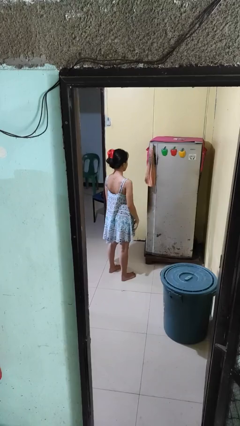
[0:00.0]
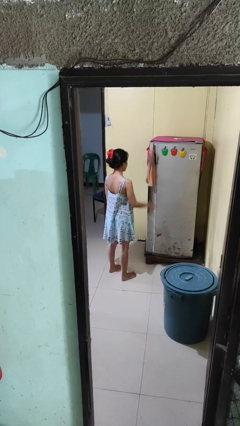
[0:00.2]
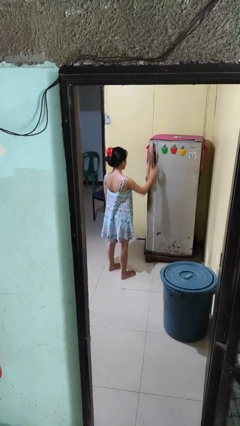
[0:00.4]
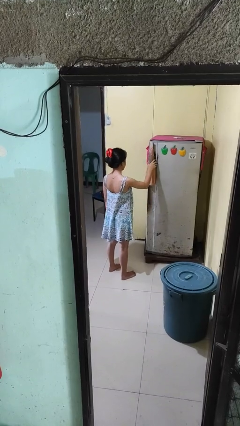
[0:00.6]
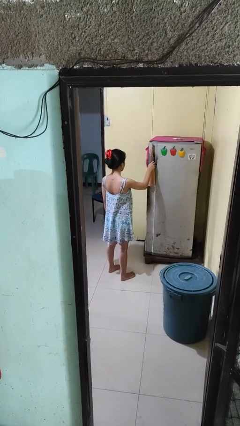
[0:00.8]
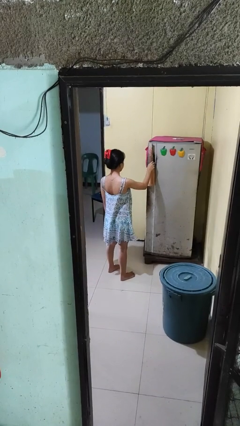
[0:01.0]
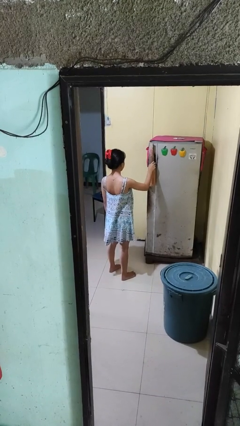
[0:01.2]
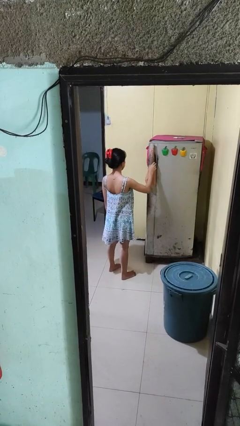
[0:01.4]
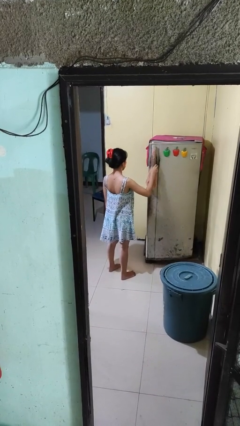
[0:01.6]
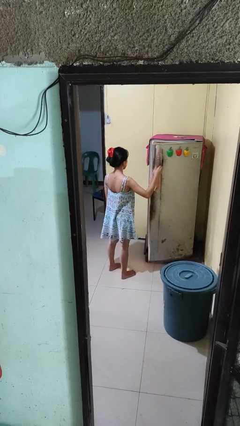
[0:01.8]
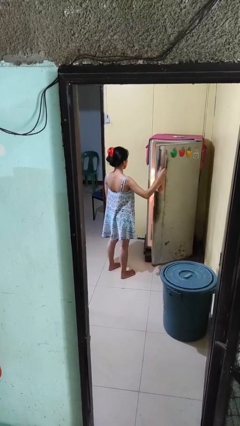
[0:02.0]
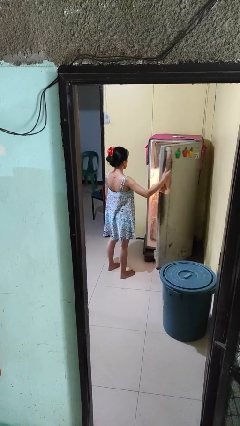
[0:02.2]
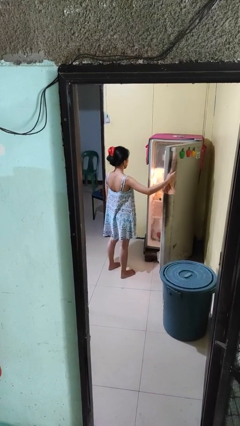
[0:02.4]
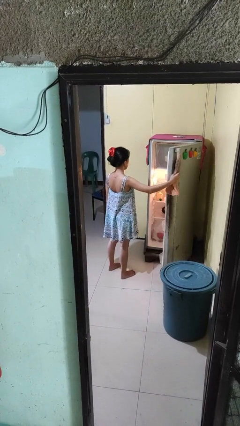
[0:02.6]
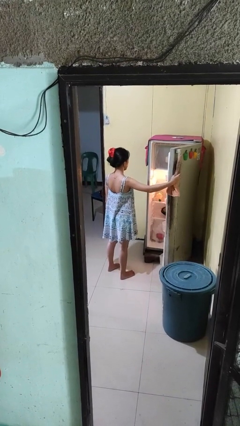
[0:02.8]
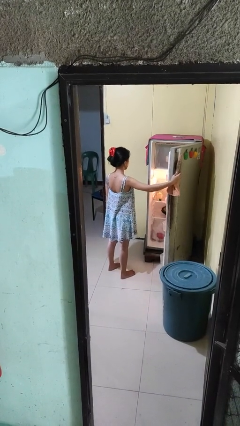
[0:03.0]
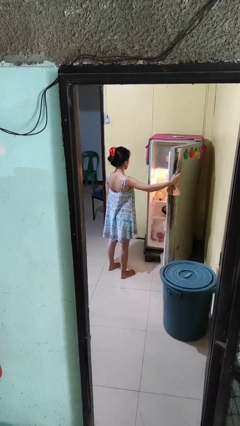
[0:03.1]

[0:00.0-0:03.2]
person opens refrigerator

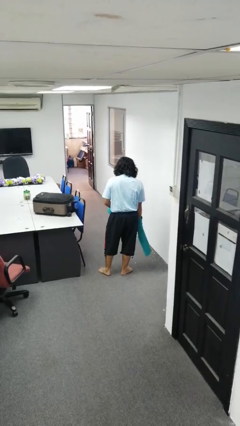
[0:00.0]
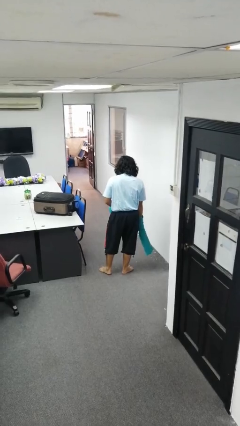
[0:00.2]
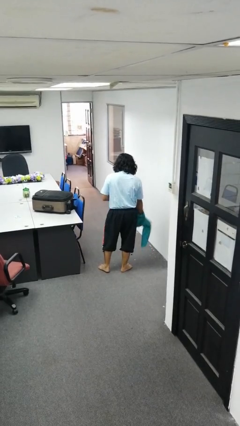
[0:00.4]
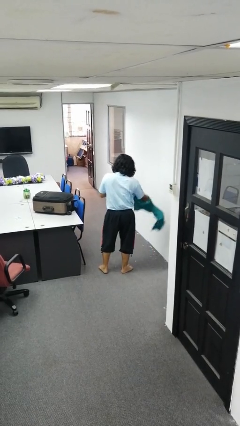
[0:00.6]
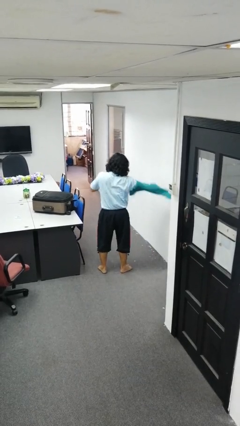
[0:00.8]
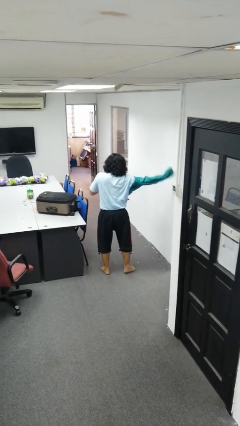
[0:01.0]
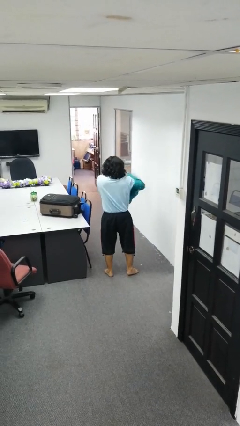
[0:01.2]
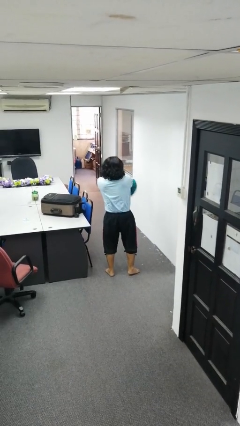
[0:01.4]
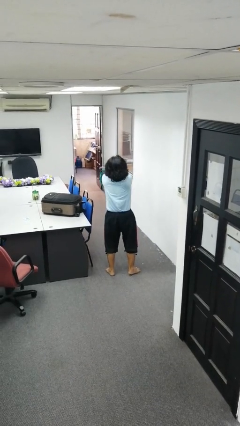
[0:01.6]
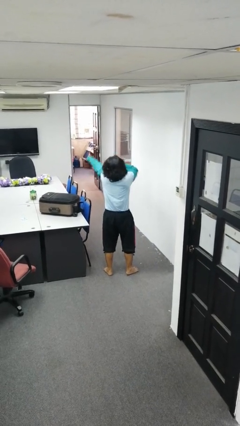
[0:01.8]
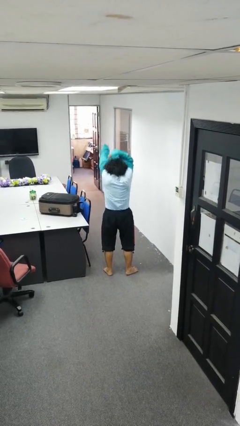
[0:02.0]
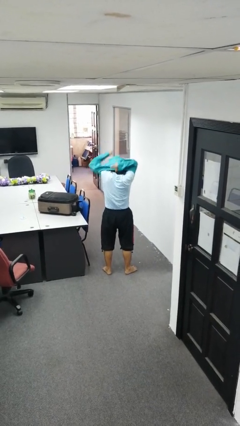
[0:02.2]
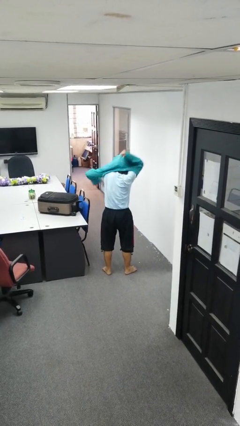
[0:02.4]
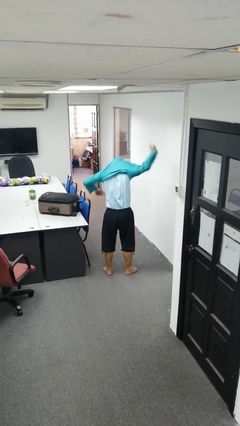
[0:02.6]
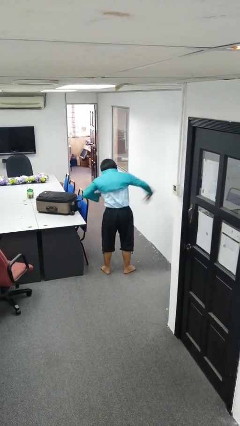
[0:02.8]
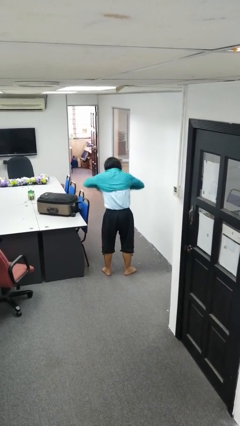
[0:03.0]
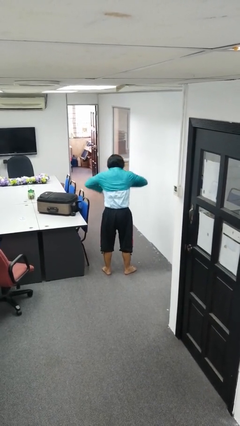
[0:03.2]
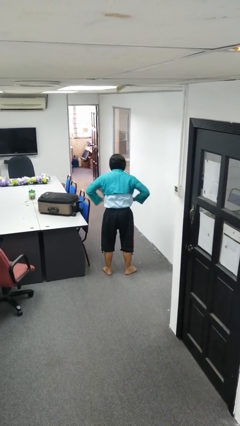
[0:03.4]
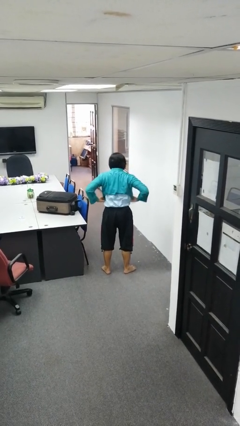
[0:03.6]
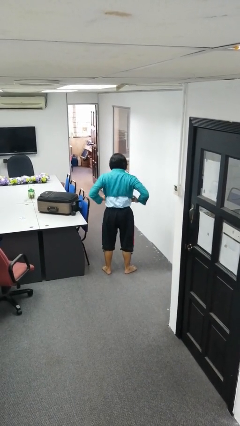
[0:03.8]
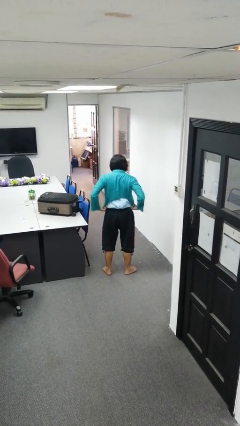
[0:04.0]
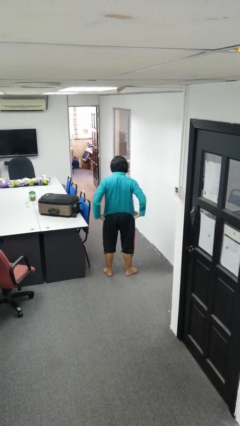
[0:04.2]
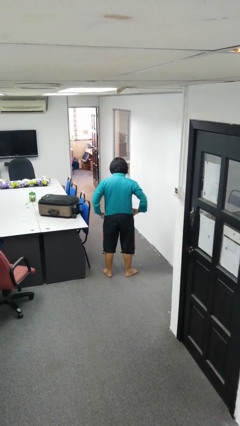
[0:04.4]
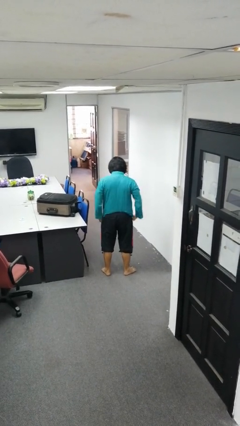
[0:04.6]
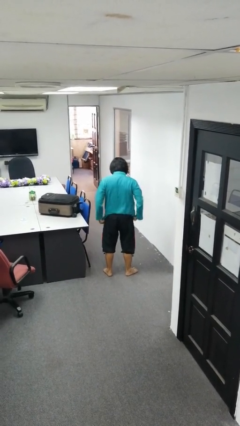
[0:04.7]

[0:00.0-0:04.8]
person puts on shirt

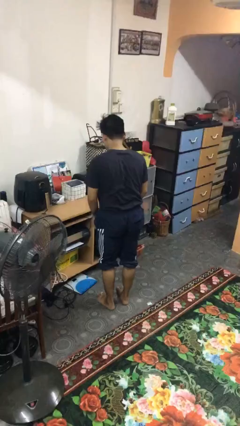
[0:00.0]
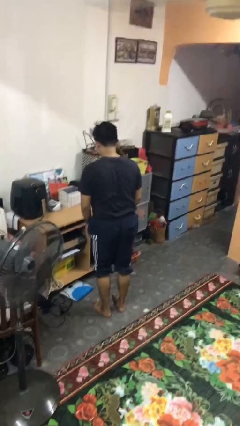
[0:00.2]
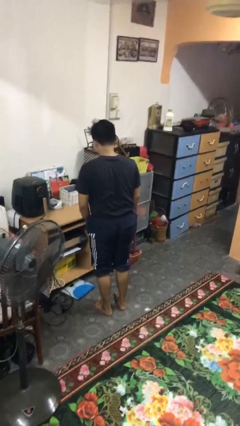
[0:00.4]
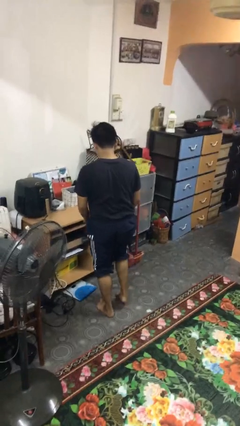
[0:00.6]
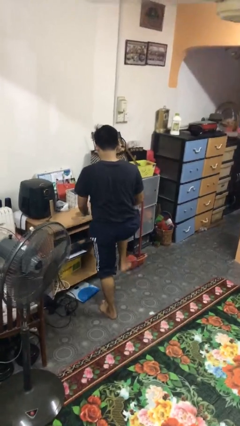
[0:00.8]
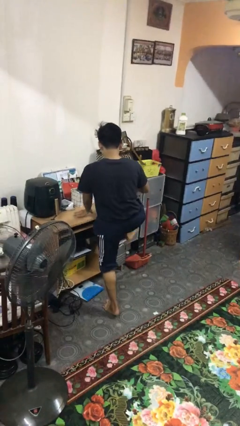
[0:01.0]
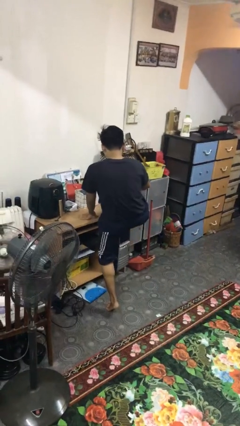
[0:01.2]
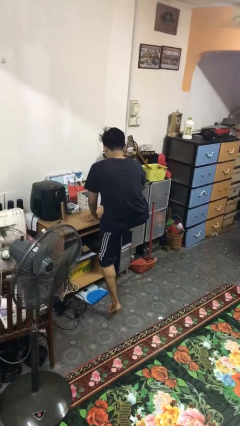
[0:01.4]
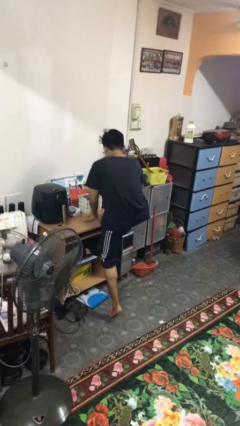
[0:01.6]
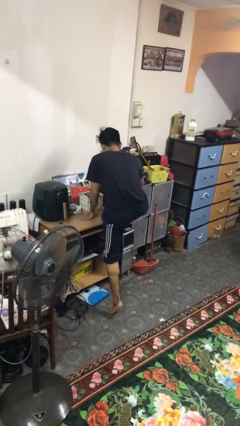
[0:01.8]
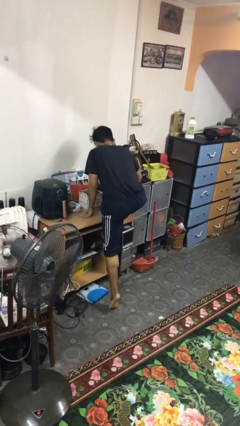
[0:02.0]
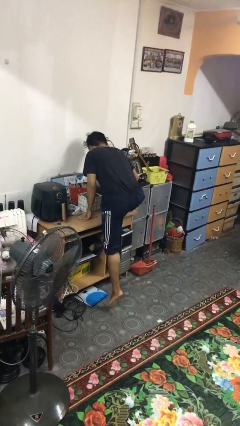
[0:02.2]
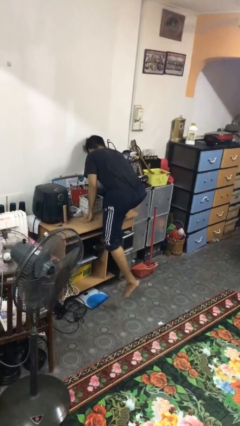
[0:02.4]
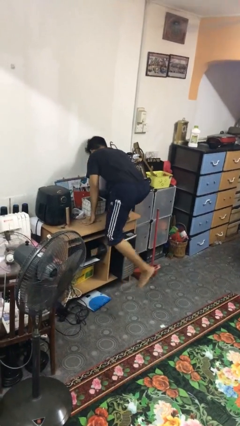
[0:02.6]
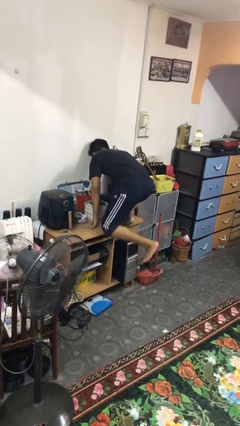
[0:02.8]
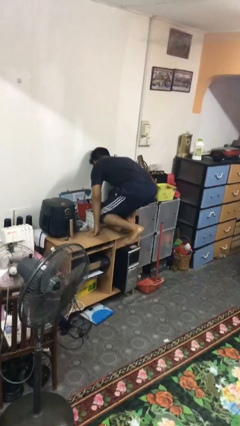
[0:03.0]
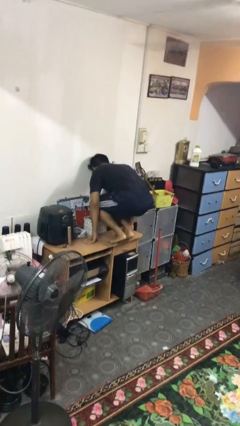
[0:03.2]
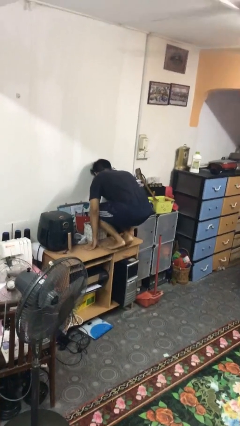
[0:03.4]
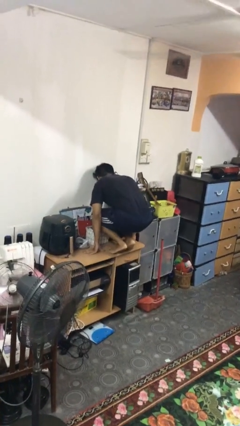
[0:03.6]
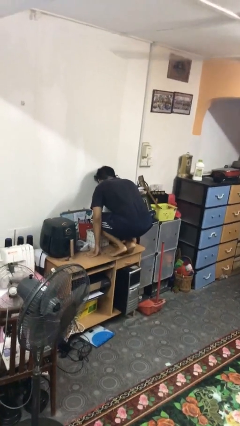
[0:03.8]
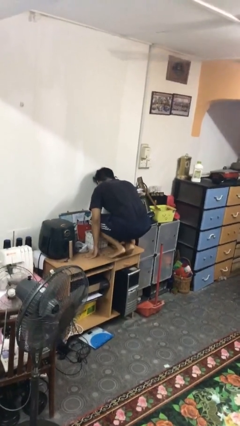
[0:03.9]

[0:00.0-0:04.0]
person climbs on table

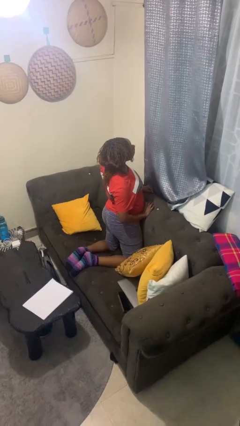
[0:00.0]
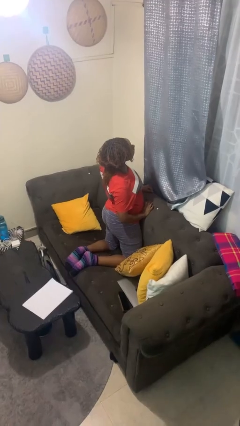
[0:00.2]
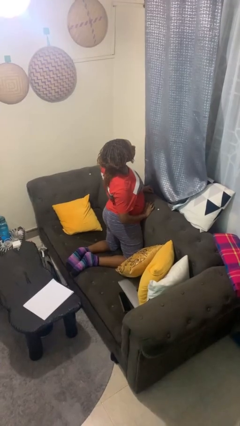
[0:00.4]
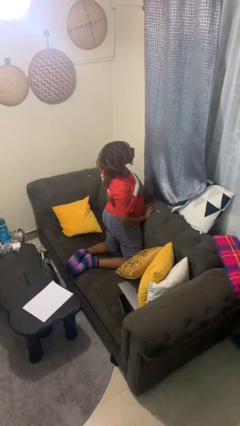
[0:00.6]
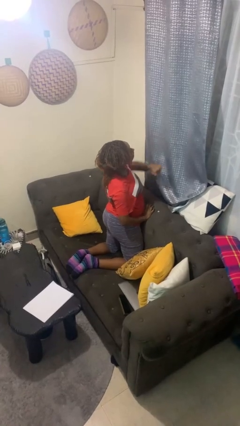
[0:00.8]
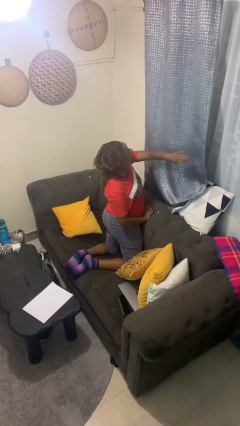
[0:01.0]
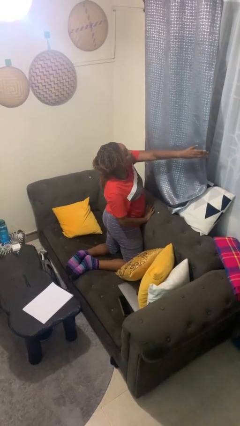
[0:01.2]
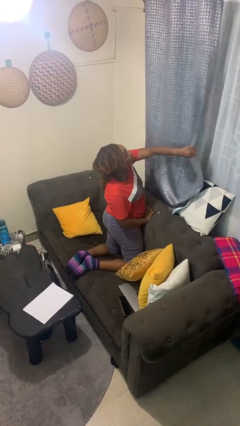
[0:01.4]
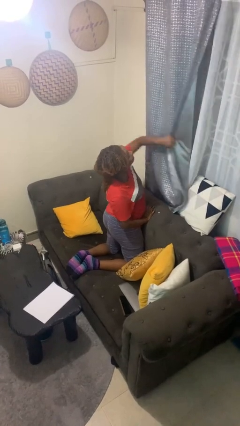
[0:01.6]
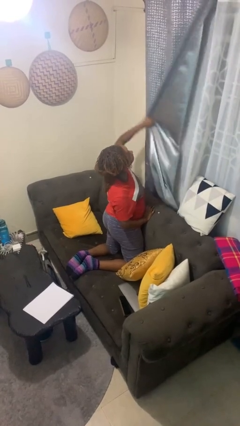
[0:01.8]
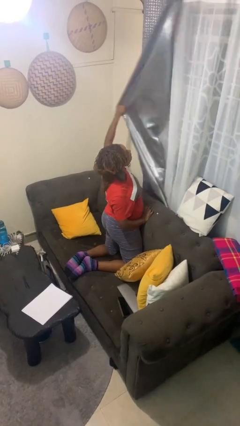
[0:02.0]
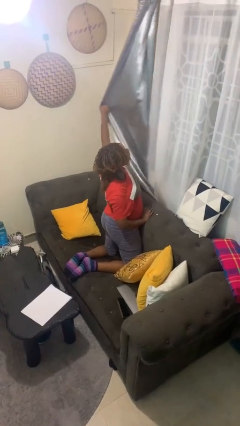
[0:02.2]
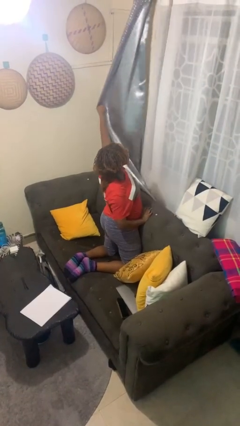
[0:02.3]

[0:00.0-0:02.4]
person opens curtains

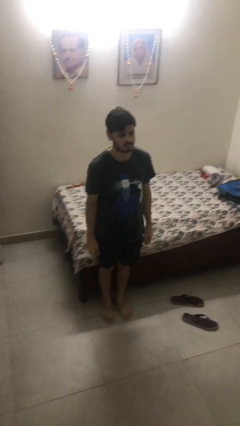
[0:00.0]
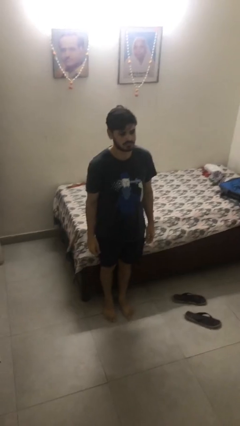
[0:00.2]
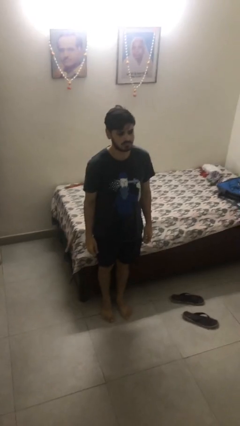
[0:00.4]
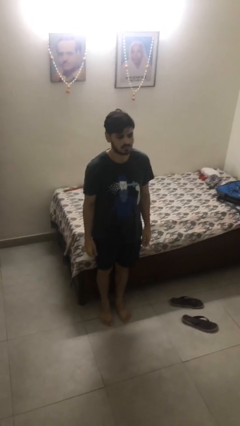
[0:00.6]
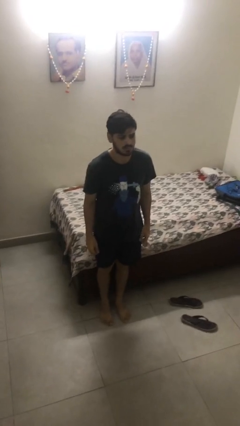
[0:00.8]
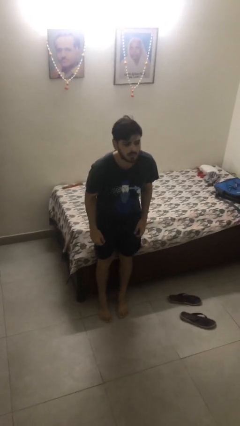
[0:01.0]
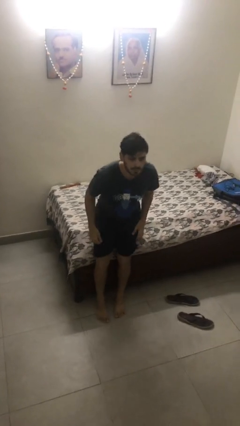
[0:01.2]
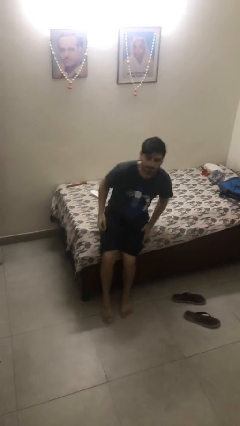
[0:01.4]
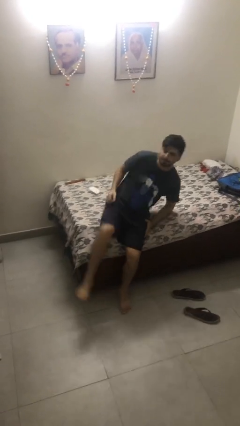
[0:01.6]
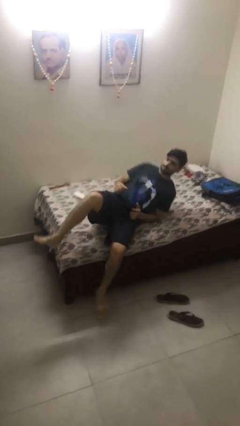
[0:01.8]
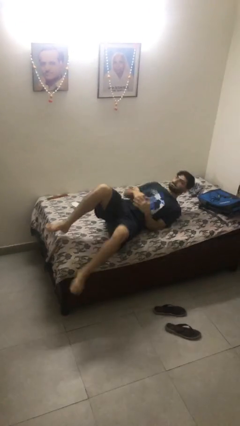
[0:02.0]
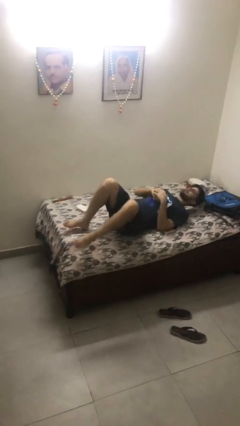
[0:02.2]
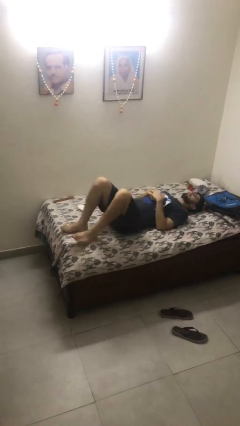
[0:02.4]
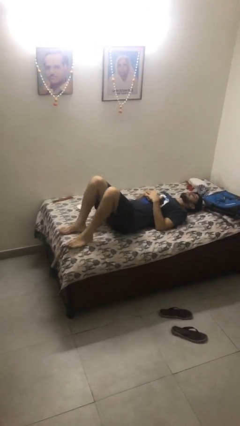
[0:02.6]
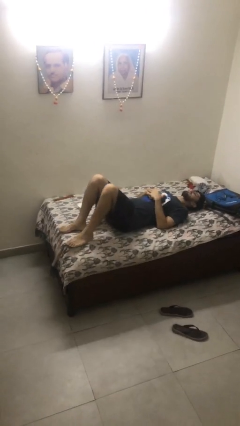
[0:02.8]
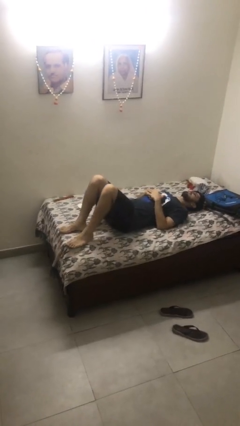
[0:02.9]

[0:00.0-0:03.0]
person lies down on bed

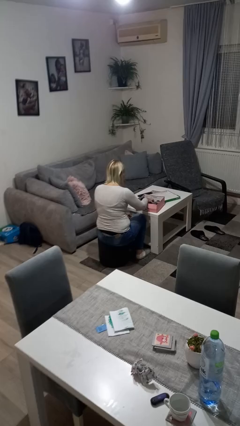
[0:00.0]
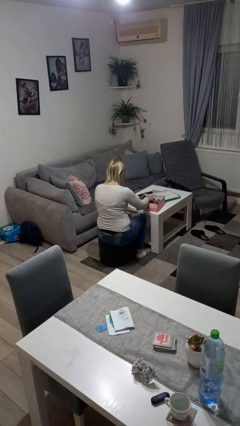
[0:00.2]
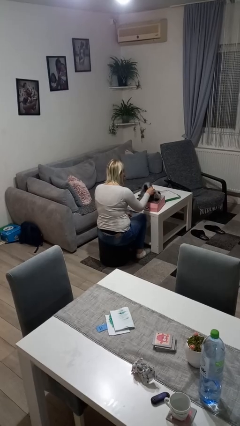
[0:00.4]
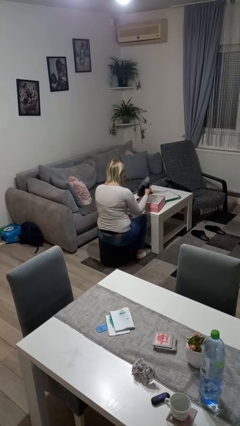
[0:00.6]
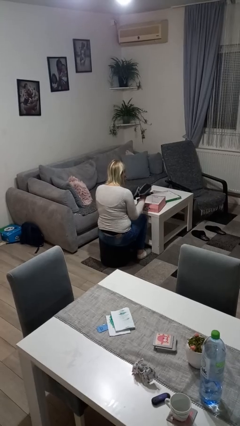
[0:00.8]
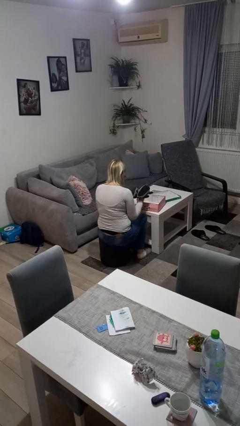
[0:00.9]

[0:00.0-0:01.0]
person takes object from box
